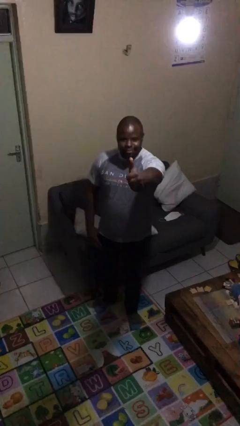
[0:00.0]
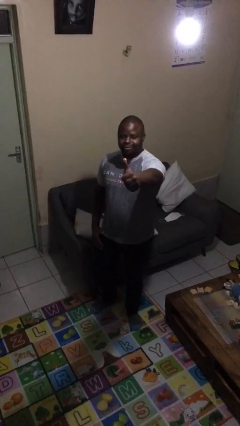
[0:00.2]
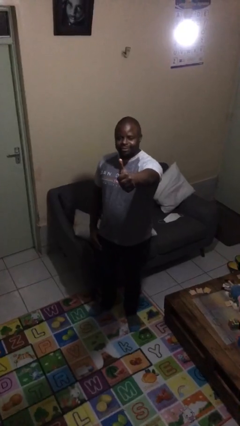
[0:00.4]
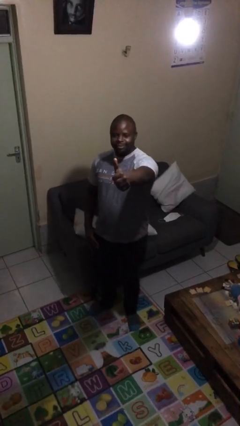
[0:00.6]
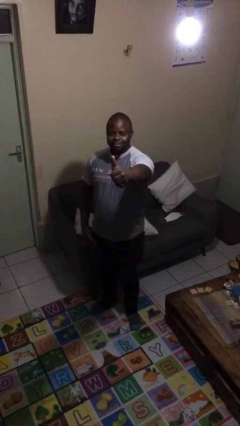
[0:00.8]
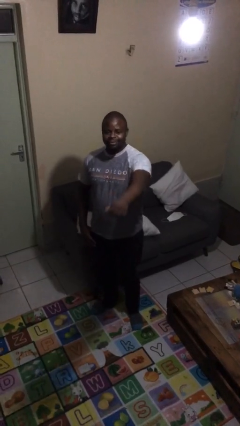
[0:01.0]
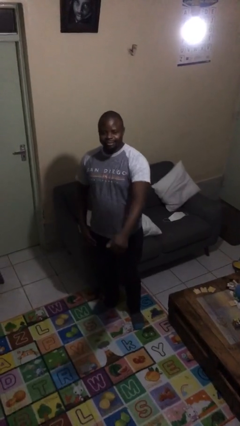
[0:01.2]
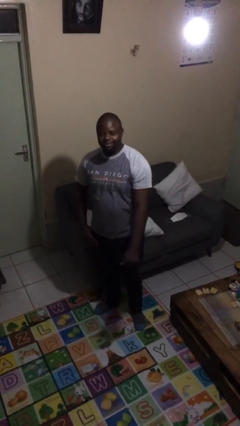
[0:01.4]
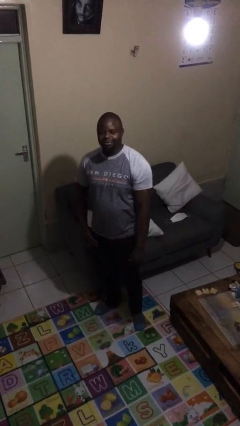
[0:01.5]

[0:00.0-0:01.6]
person gestures thumbs up

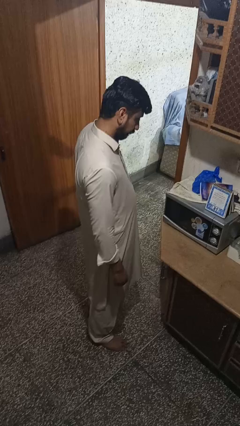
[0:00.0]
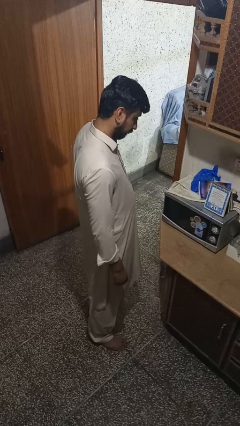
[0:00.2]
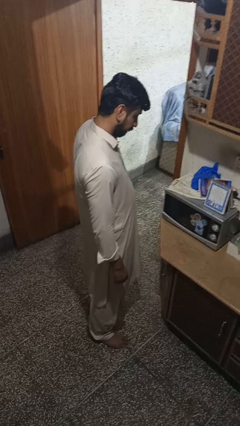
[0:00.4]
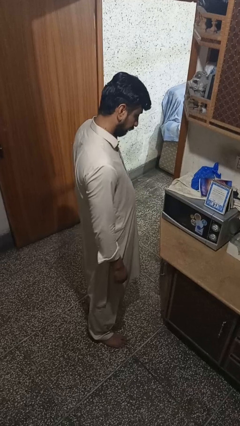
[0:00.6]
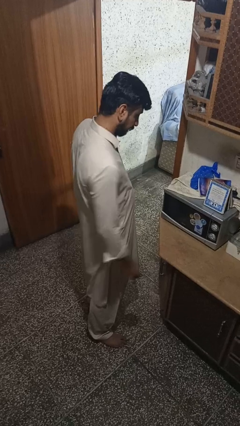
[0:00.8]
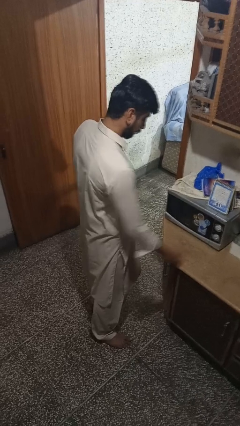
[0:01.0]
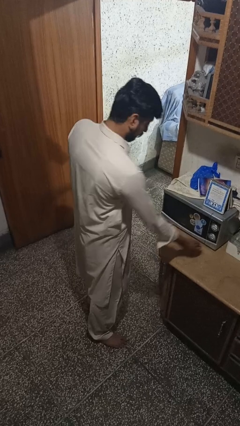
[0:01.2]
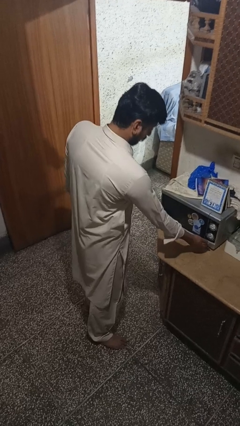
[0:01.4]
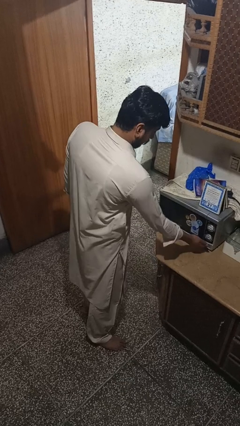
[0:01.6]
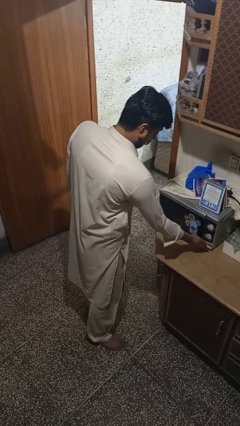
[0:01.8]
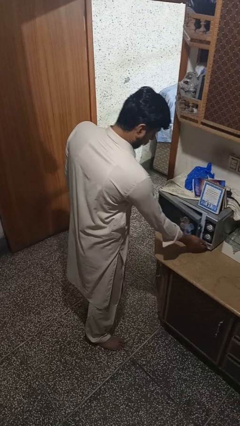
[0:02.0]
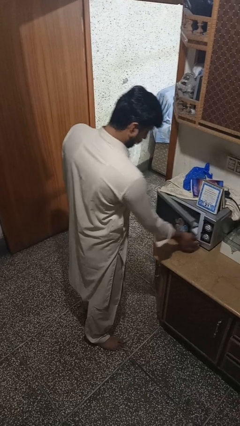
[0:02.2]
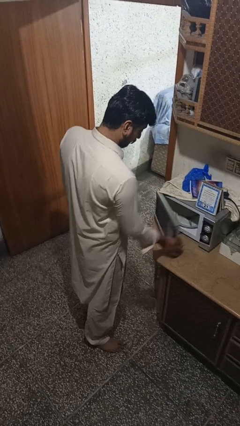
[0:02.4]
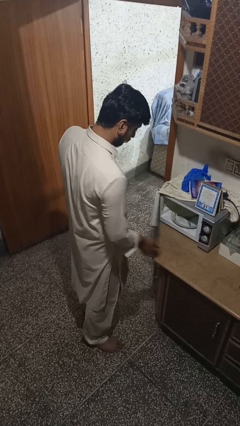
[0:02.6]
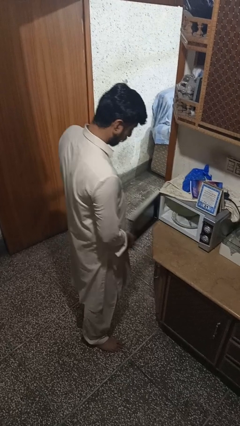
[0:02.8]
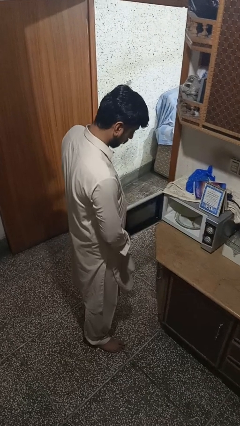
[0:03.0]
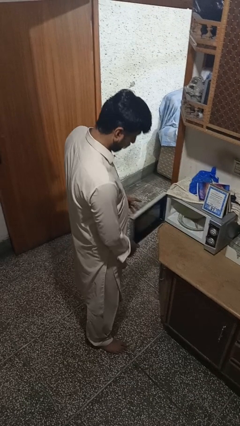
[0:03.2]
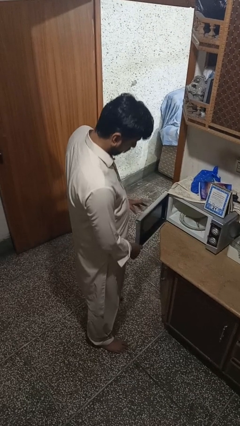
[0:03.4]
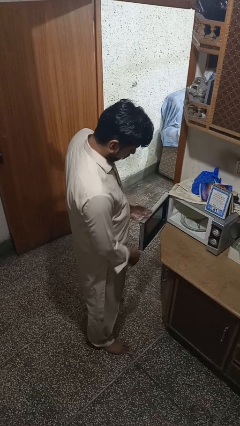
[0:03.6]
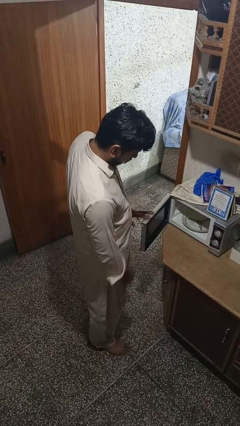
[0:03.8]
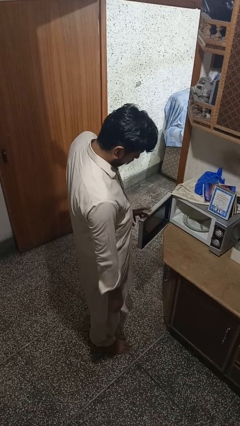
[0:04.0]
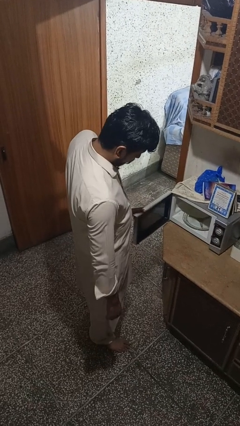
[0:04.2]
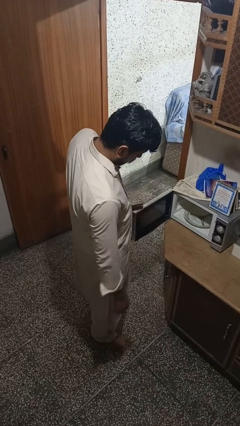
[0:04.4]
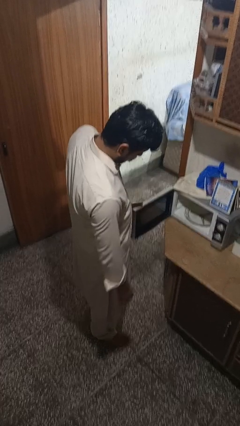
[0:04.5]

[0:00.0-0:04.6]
person opens oven door

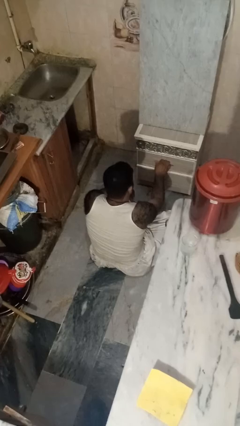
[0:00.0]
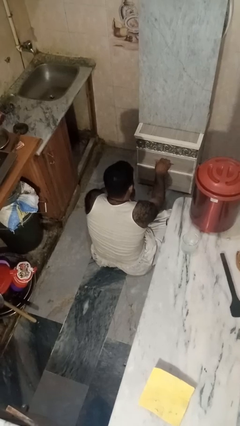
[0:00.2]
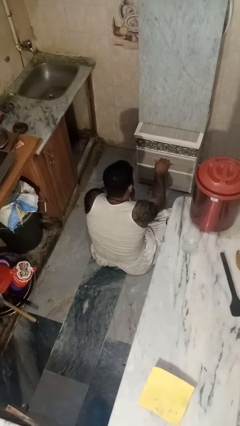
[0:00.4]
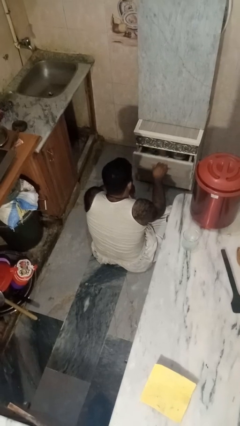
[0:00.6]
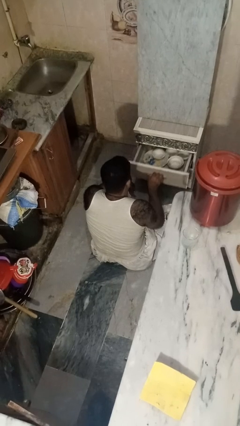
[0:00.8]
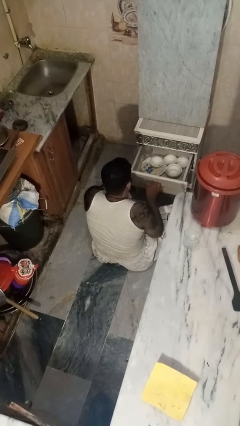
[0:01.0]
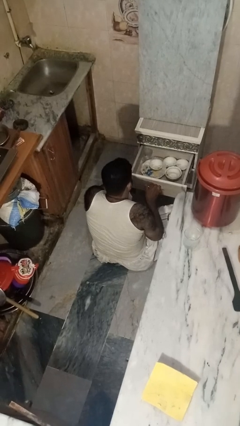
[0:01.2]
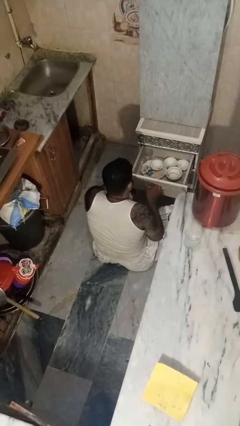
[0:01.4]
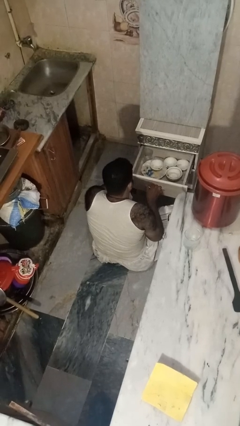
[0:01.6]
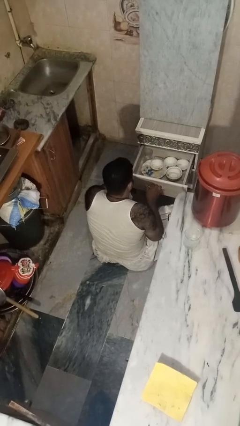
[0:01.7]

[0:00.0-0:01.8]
person opens kitchen drawer

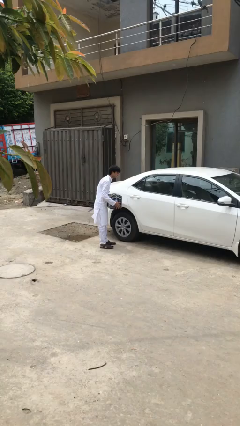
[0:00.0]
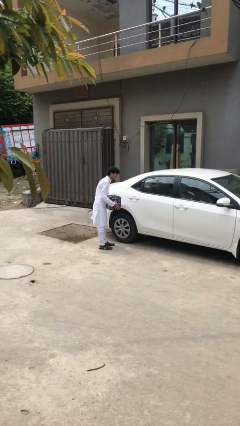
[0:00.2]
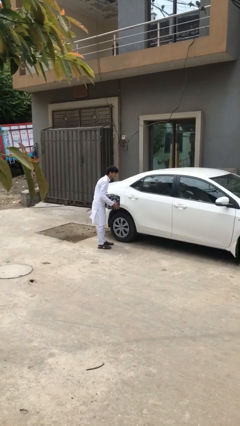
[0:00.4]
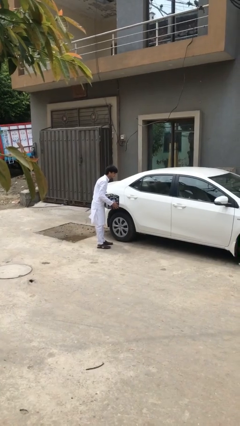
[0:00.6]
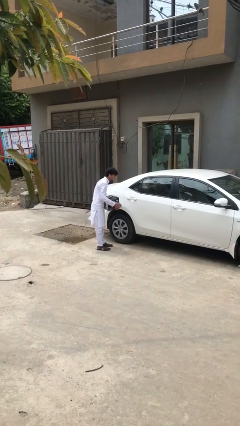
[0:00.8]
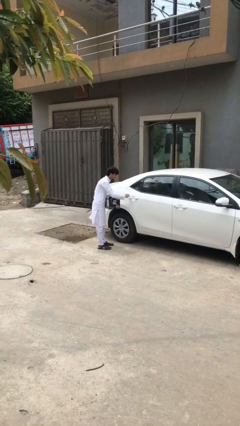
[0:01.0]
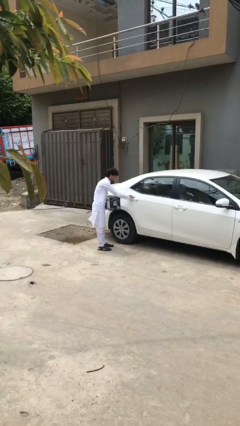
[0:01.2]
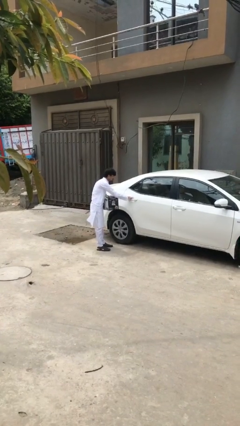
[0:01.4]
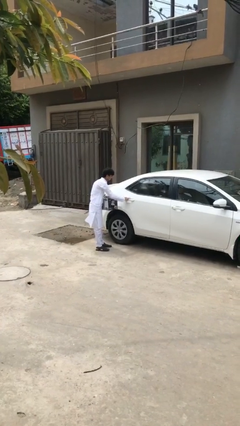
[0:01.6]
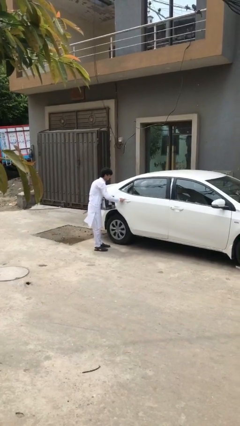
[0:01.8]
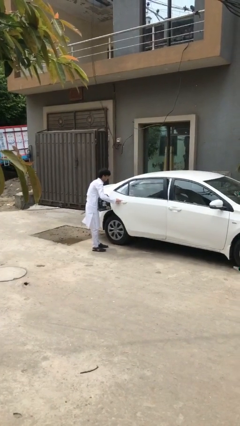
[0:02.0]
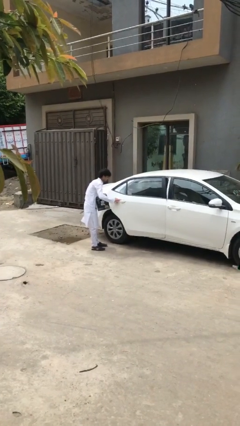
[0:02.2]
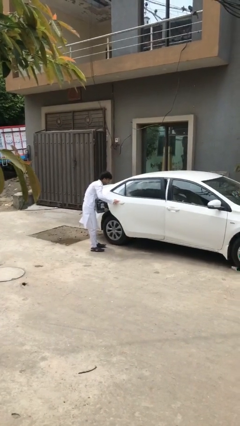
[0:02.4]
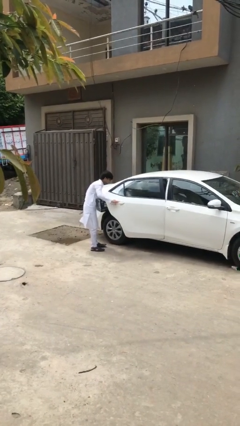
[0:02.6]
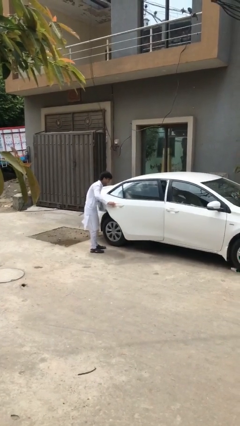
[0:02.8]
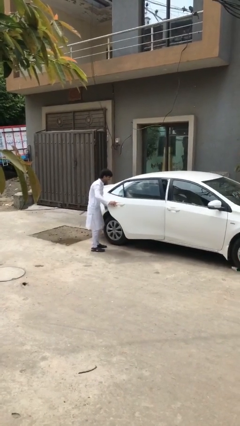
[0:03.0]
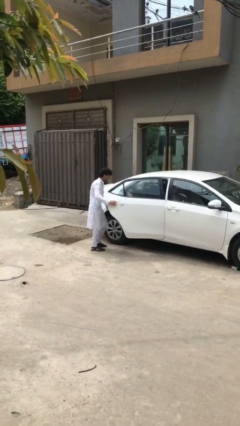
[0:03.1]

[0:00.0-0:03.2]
person opens car door

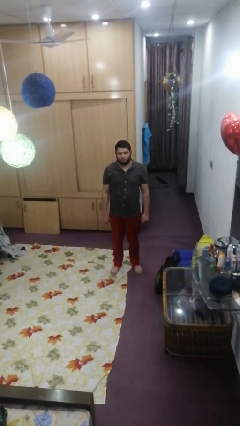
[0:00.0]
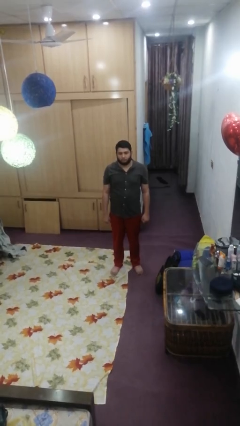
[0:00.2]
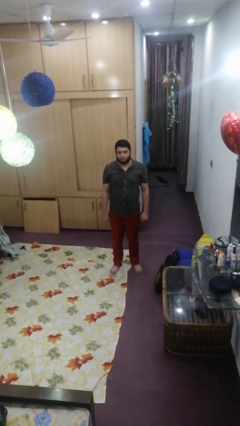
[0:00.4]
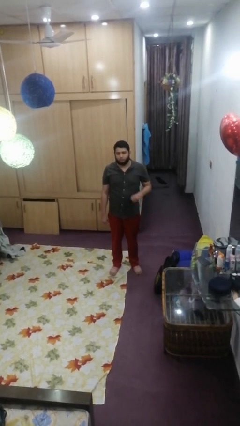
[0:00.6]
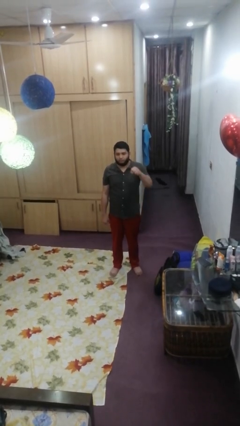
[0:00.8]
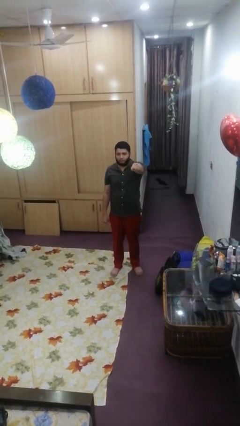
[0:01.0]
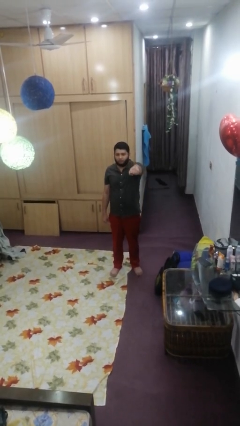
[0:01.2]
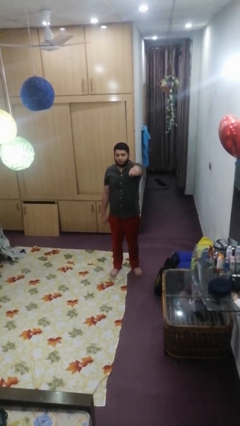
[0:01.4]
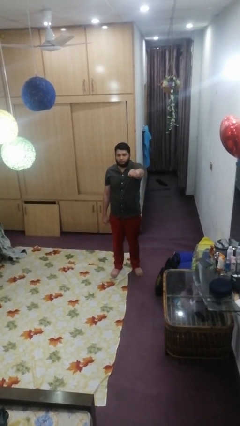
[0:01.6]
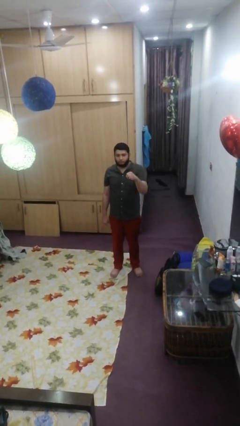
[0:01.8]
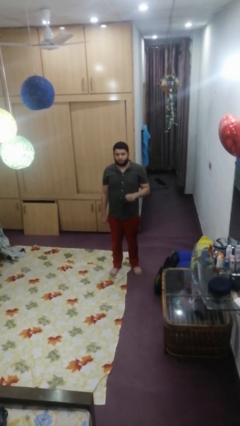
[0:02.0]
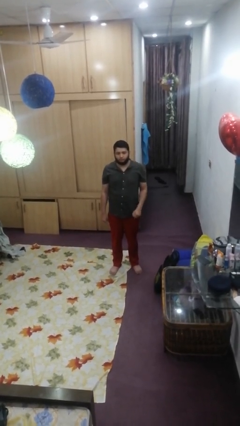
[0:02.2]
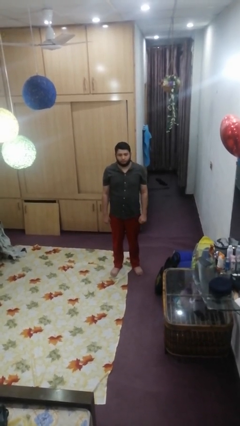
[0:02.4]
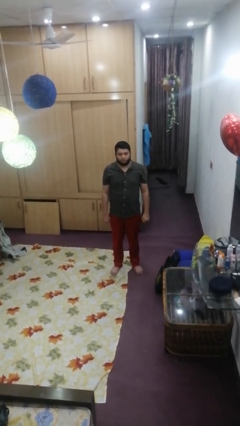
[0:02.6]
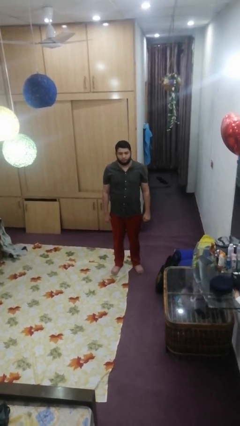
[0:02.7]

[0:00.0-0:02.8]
person punches

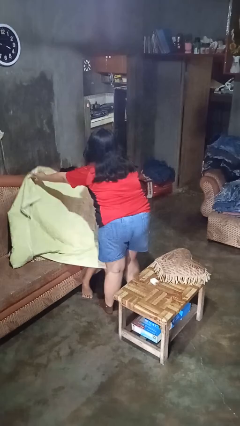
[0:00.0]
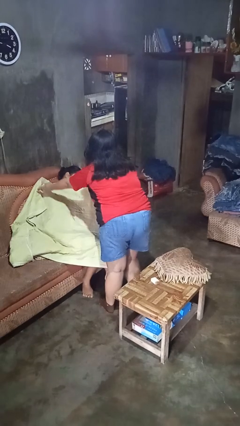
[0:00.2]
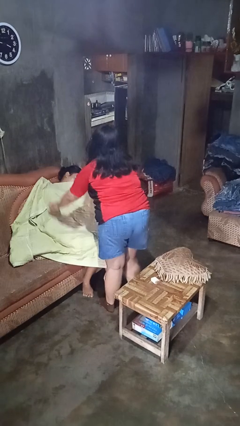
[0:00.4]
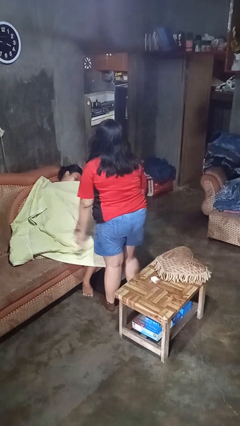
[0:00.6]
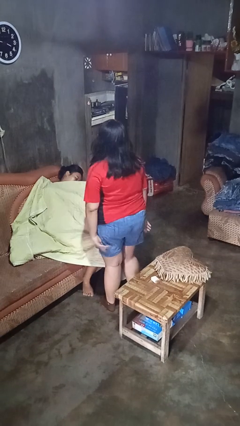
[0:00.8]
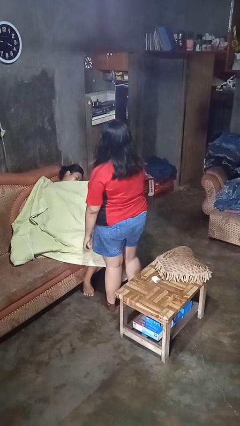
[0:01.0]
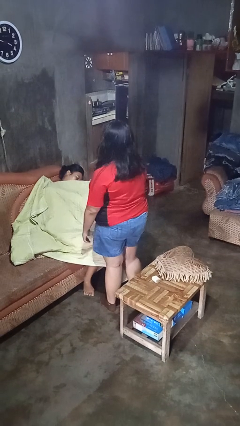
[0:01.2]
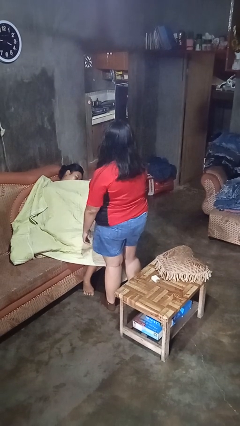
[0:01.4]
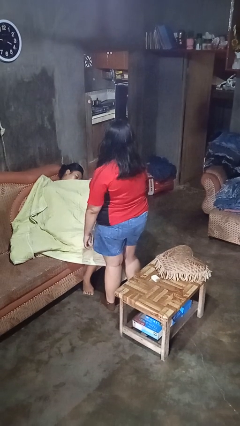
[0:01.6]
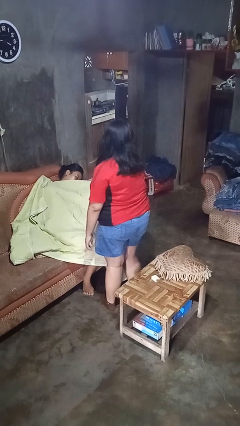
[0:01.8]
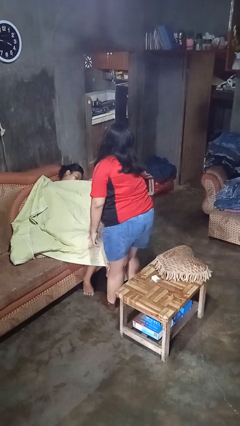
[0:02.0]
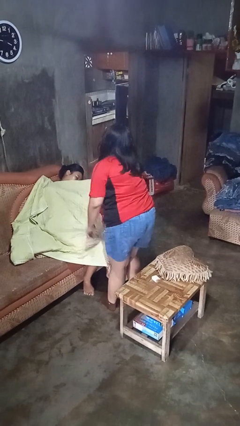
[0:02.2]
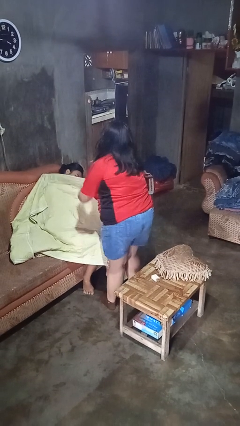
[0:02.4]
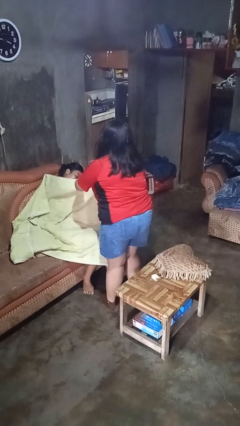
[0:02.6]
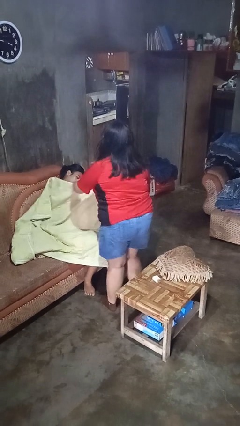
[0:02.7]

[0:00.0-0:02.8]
person covers friend with blanket

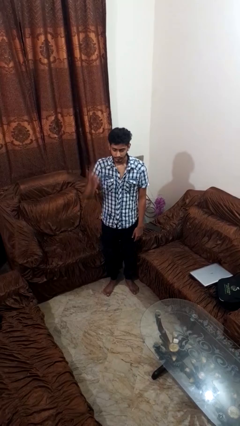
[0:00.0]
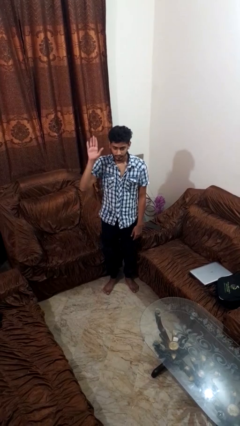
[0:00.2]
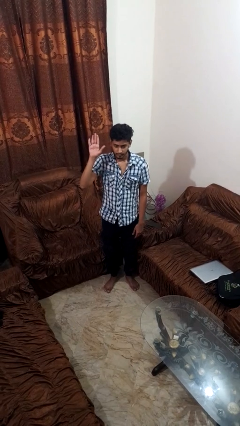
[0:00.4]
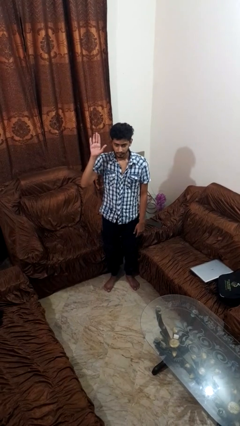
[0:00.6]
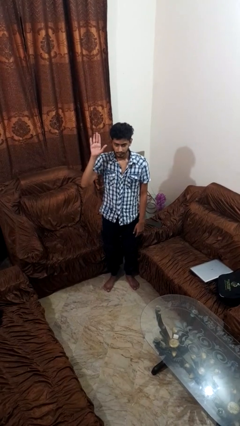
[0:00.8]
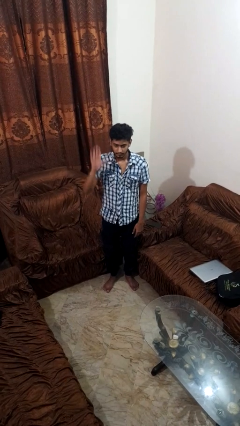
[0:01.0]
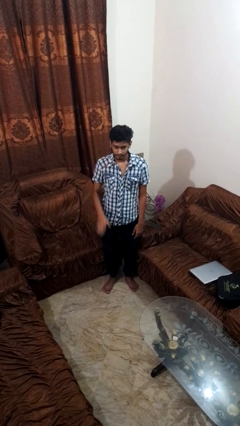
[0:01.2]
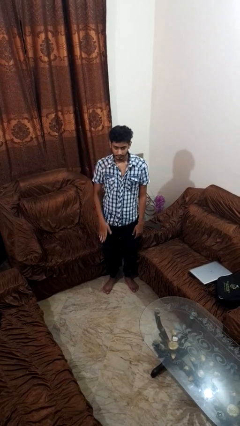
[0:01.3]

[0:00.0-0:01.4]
person gestures raise hand
